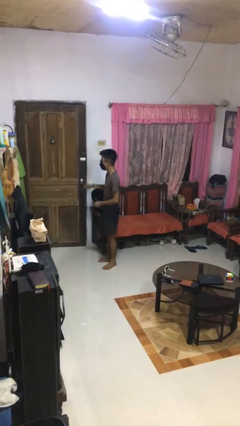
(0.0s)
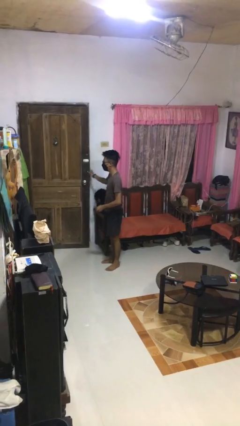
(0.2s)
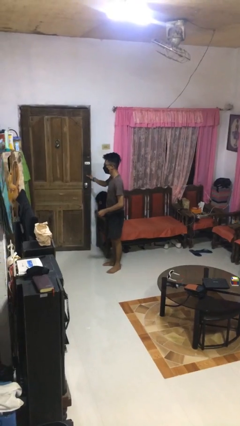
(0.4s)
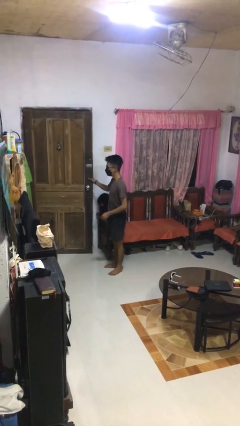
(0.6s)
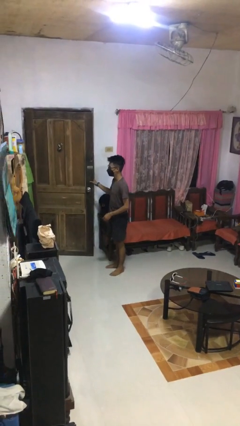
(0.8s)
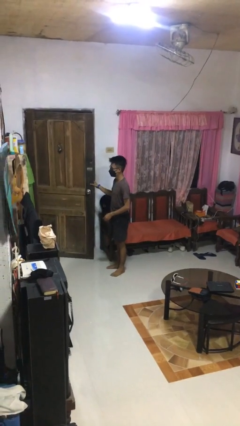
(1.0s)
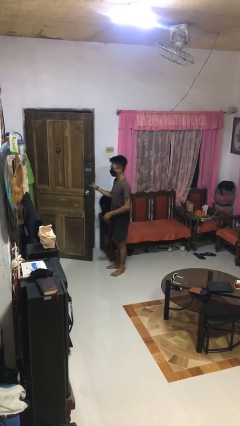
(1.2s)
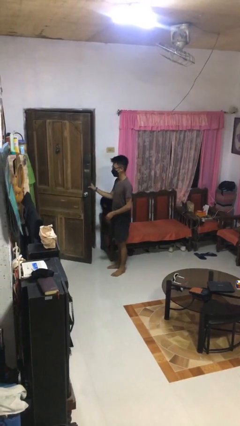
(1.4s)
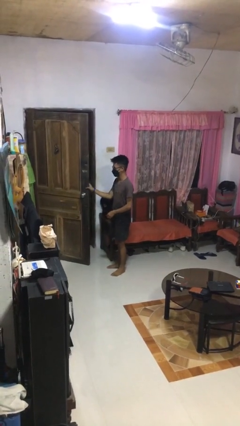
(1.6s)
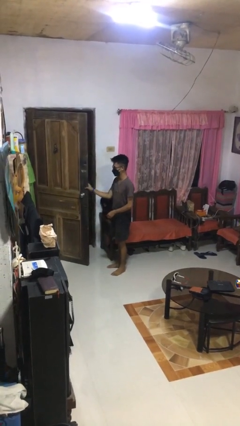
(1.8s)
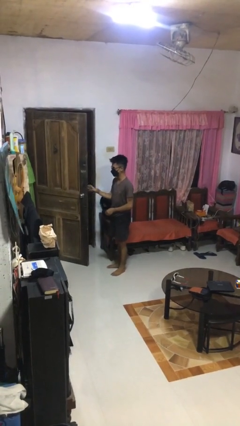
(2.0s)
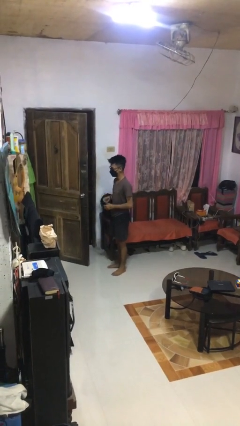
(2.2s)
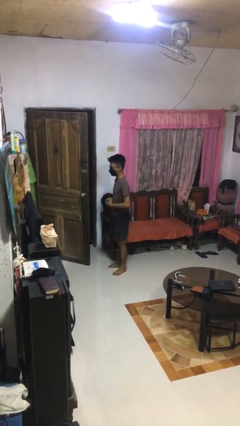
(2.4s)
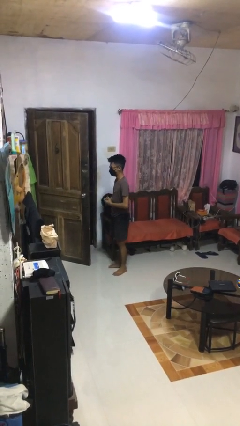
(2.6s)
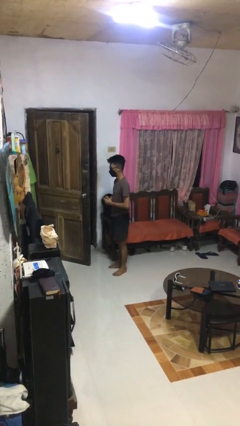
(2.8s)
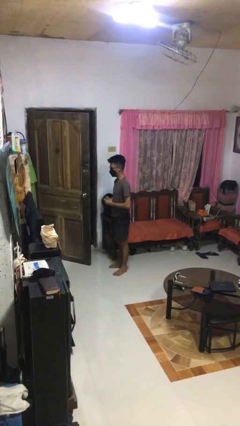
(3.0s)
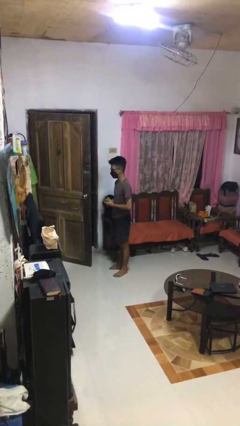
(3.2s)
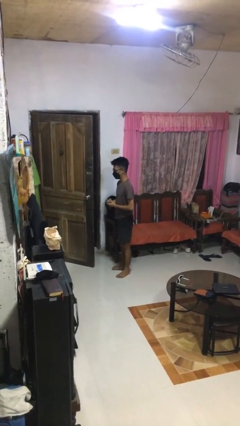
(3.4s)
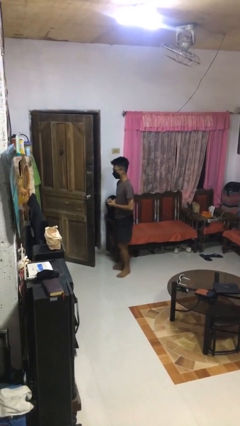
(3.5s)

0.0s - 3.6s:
person opens facility door

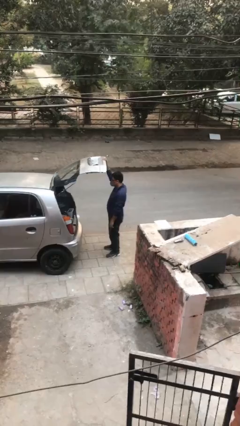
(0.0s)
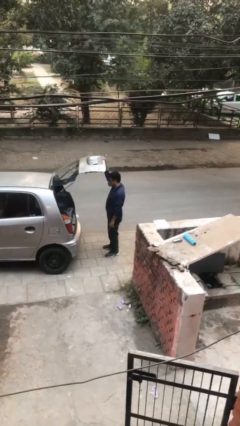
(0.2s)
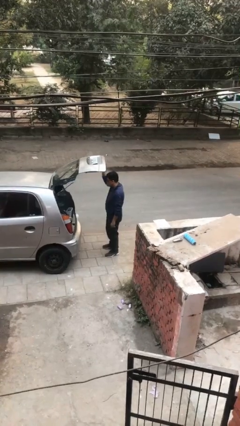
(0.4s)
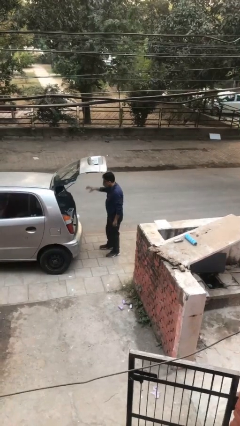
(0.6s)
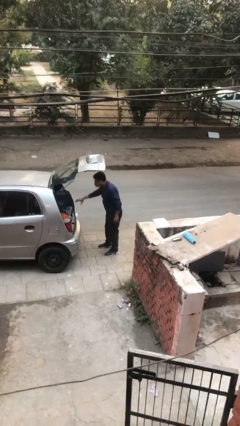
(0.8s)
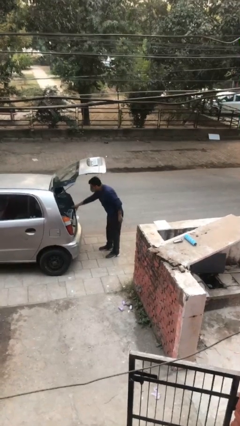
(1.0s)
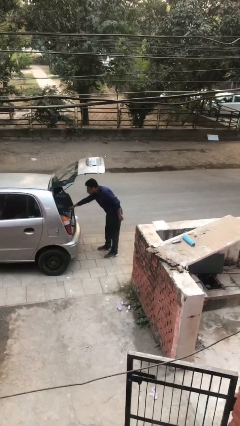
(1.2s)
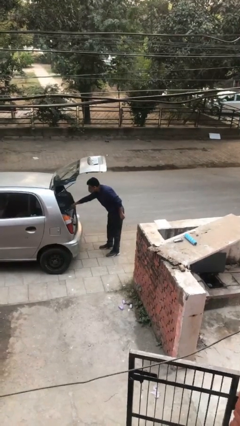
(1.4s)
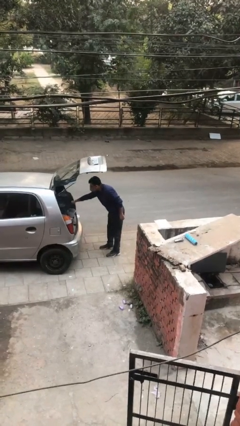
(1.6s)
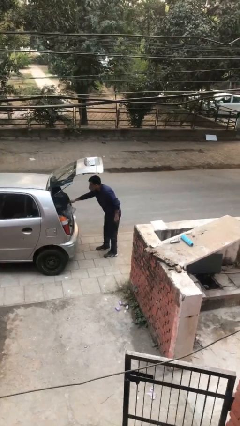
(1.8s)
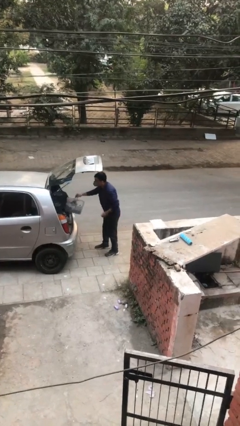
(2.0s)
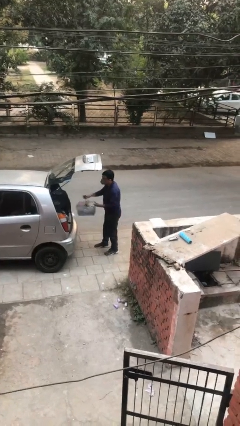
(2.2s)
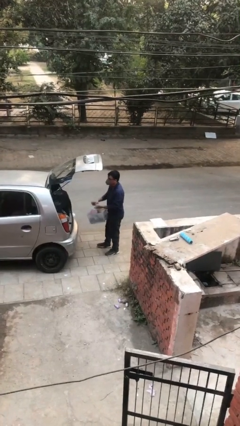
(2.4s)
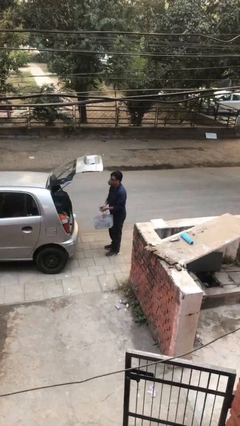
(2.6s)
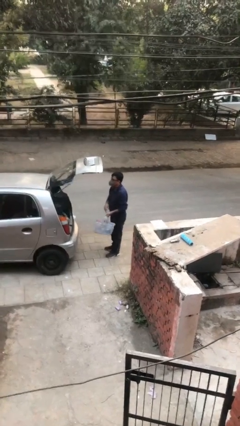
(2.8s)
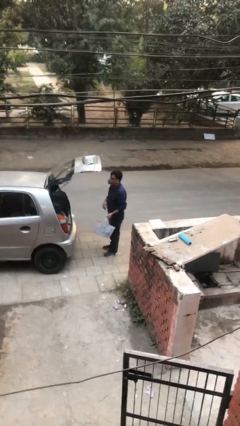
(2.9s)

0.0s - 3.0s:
person unloads car

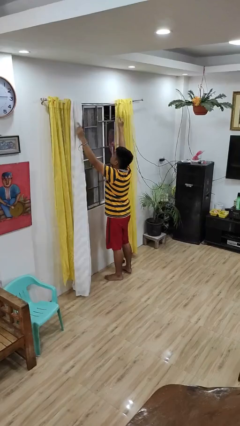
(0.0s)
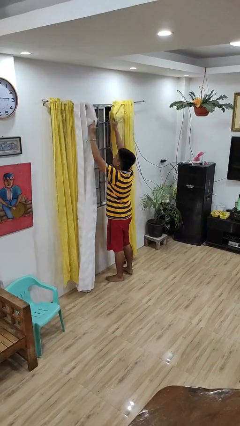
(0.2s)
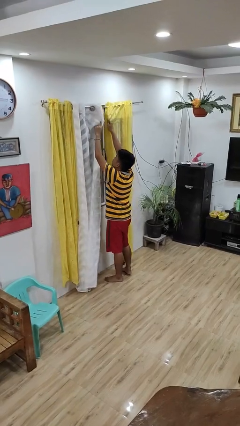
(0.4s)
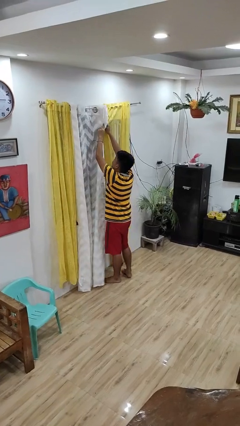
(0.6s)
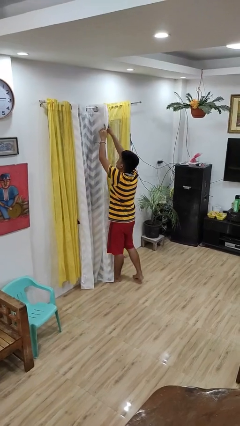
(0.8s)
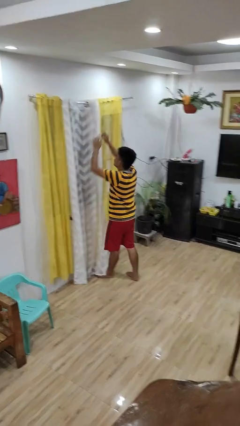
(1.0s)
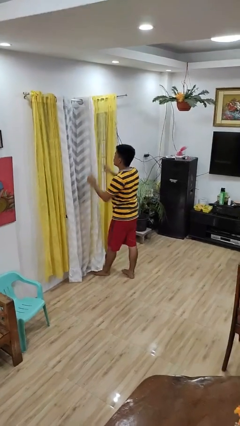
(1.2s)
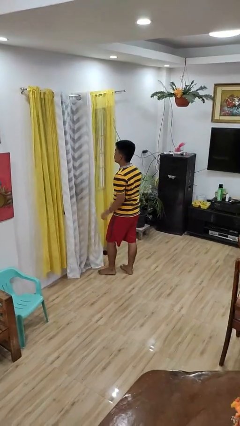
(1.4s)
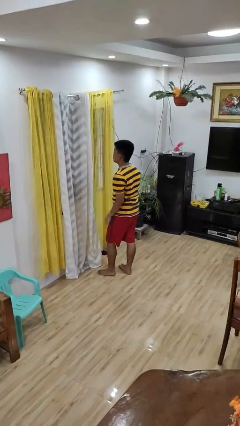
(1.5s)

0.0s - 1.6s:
person closes curtains

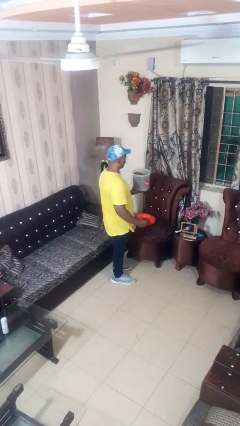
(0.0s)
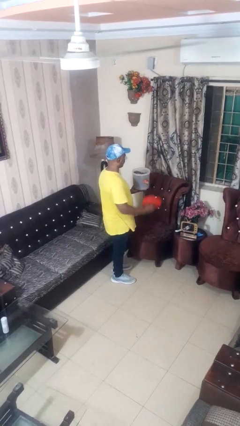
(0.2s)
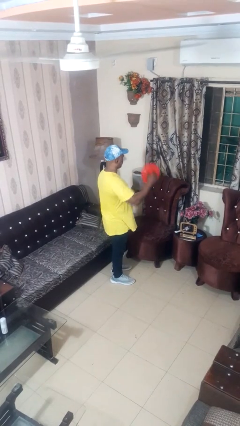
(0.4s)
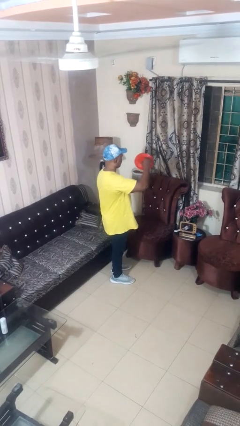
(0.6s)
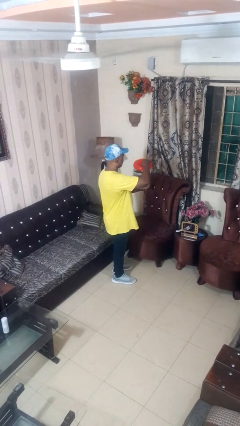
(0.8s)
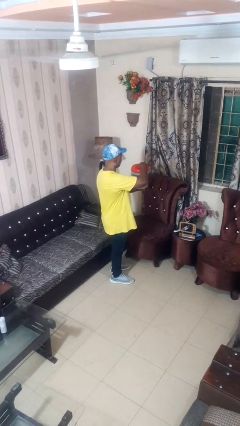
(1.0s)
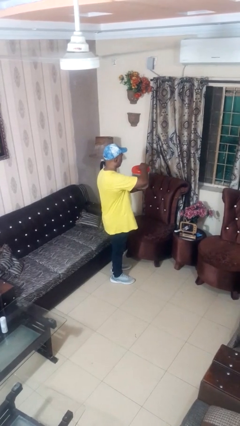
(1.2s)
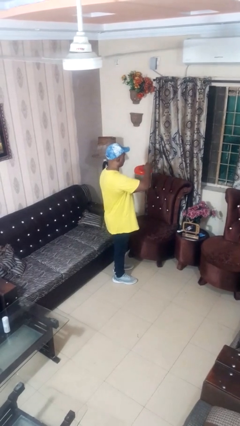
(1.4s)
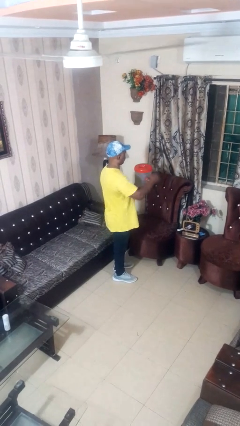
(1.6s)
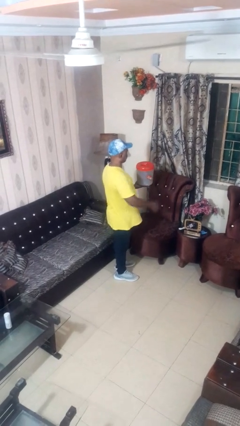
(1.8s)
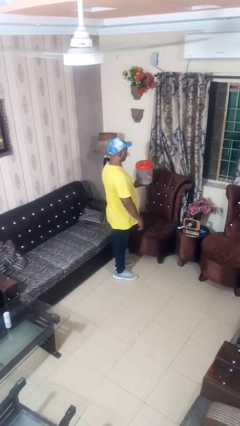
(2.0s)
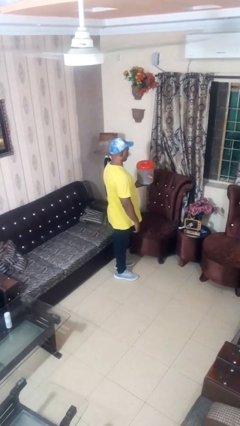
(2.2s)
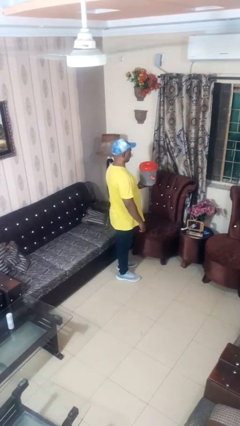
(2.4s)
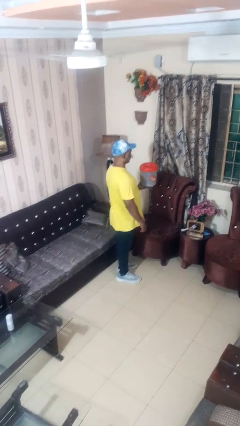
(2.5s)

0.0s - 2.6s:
person closes jar

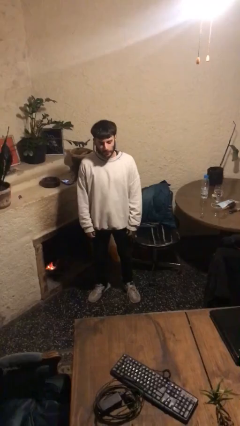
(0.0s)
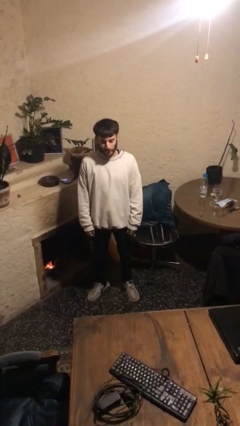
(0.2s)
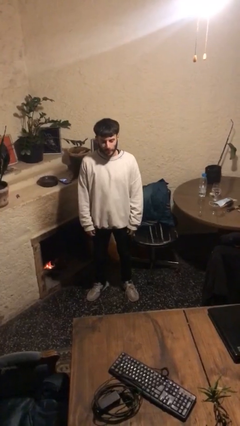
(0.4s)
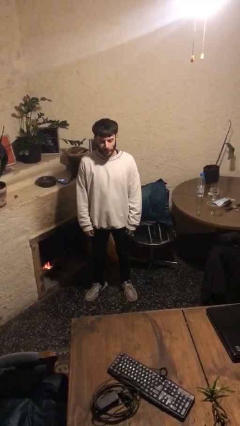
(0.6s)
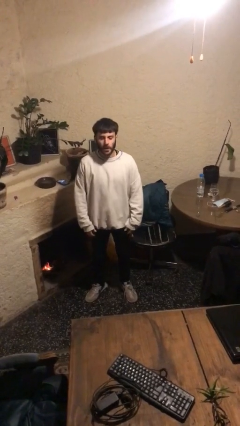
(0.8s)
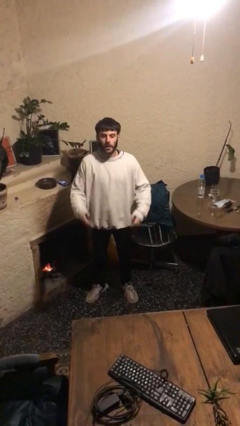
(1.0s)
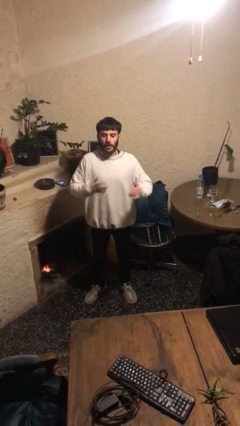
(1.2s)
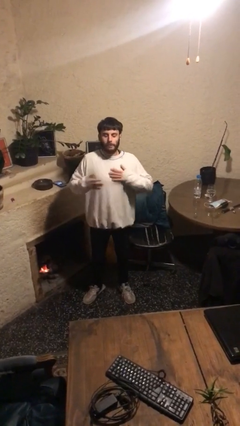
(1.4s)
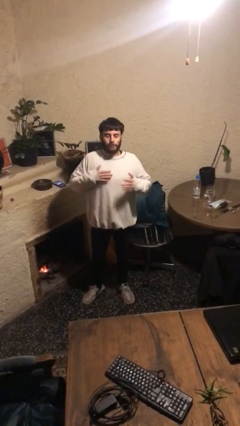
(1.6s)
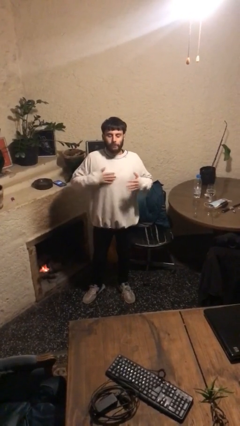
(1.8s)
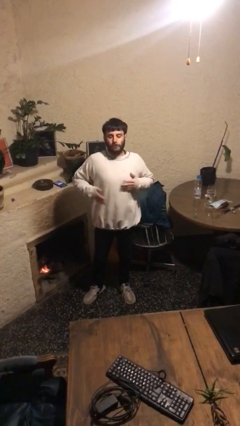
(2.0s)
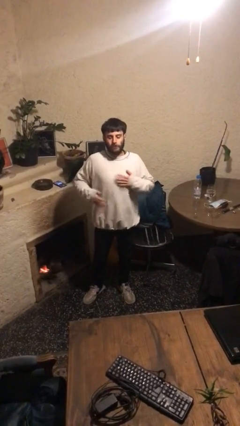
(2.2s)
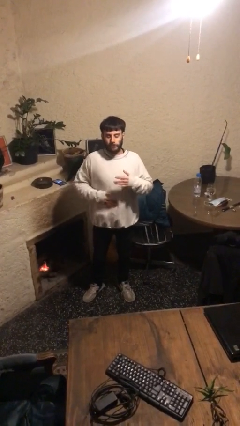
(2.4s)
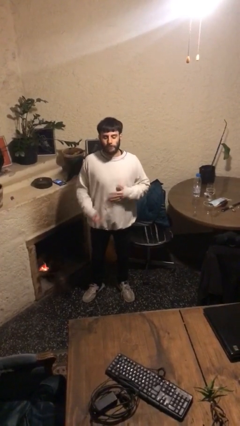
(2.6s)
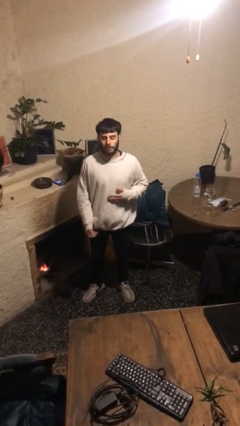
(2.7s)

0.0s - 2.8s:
person drums on chest

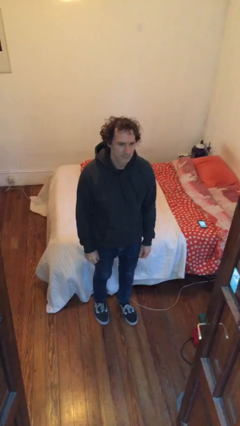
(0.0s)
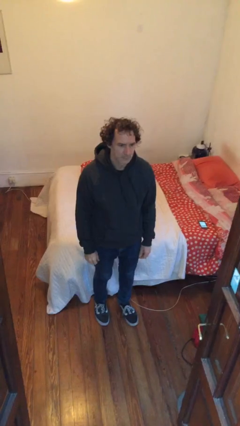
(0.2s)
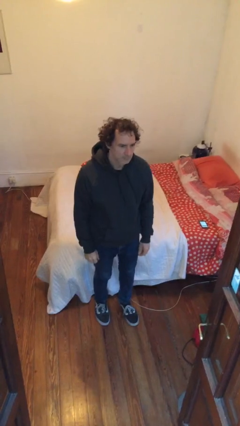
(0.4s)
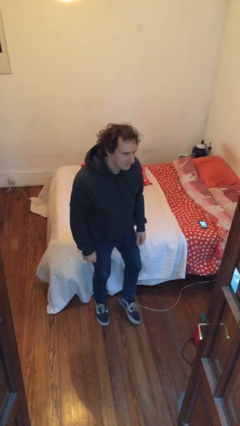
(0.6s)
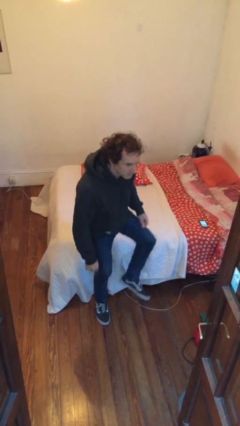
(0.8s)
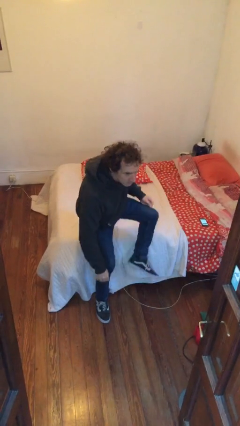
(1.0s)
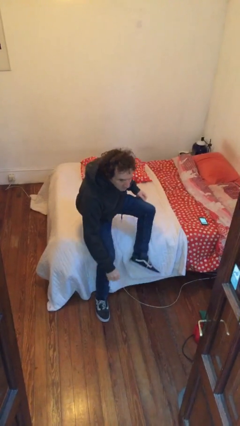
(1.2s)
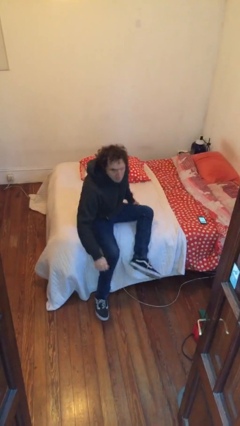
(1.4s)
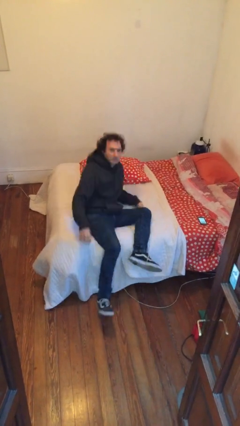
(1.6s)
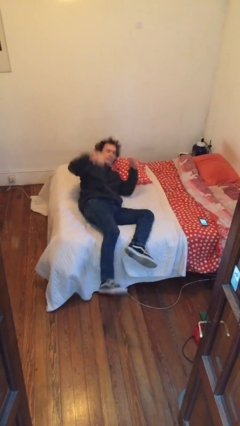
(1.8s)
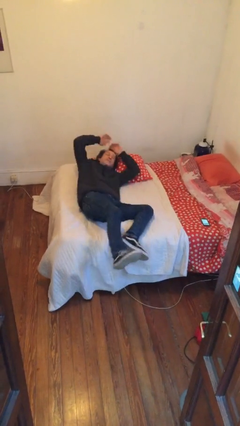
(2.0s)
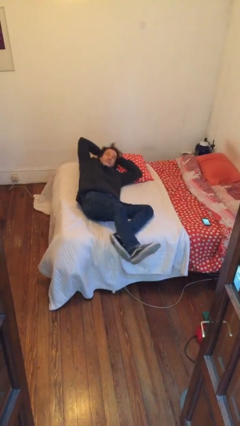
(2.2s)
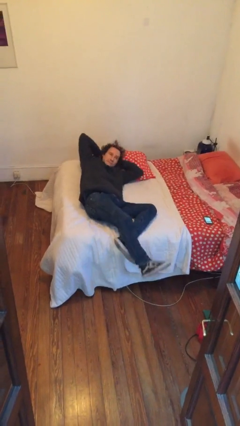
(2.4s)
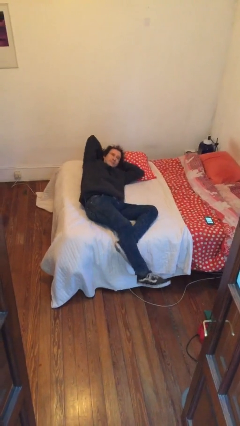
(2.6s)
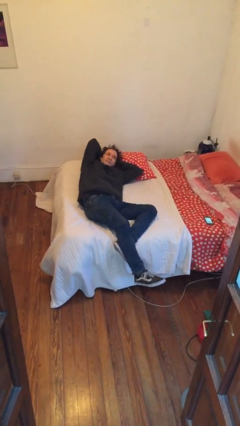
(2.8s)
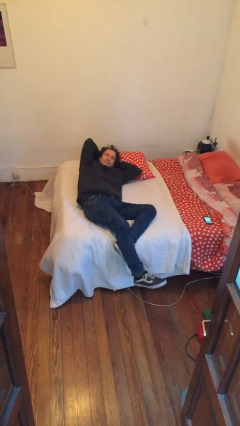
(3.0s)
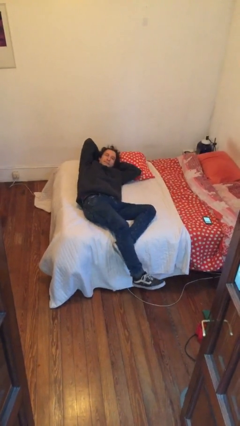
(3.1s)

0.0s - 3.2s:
person lies down on bed

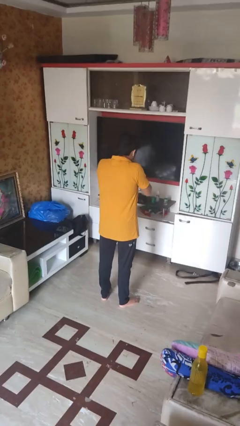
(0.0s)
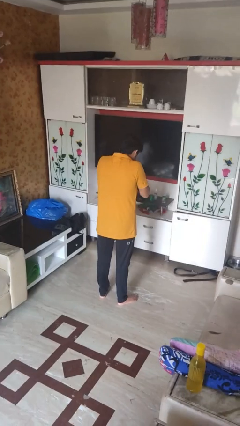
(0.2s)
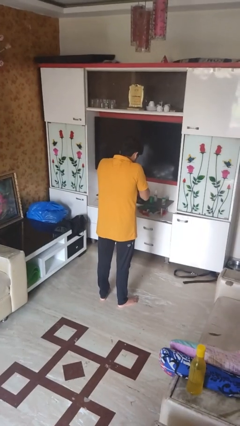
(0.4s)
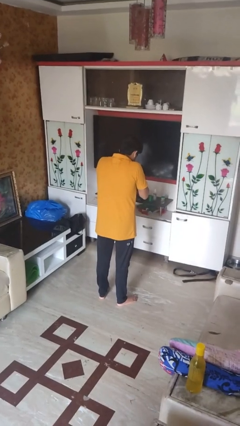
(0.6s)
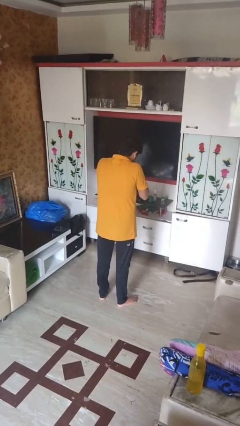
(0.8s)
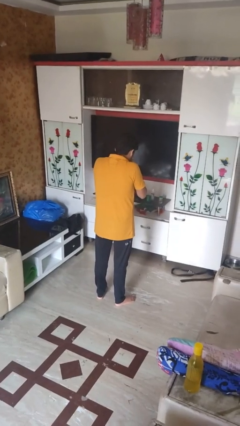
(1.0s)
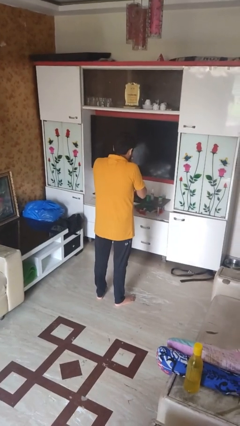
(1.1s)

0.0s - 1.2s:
person sneezes into hand
